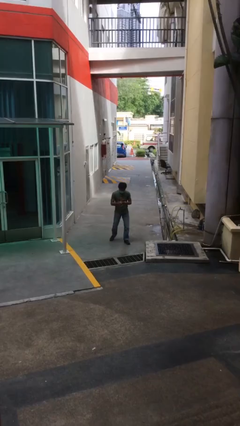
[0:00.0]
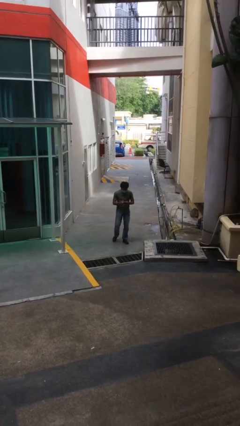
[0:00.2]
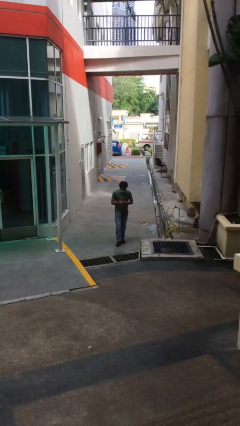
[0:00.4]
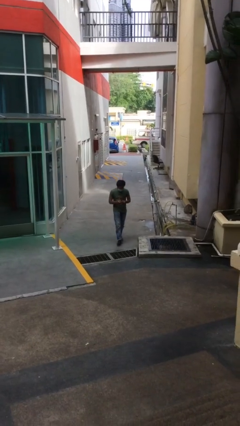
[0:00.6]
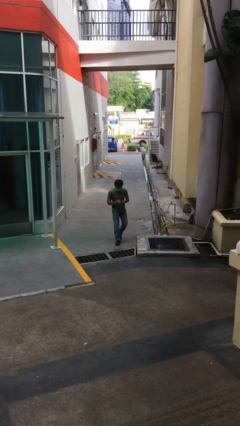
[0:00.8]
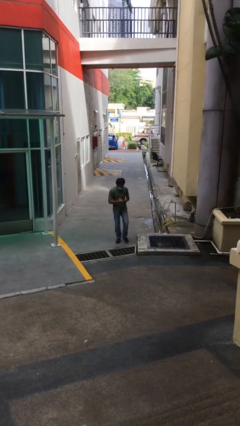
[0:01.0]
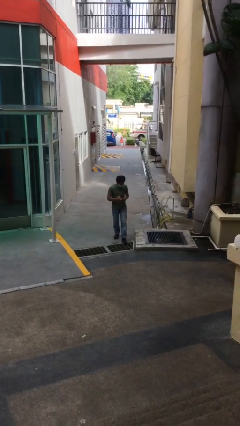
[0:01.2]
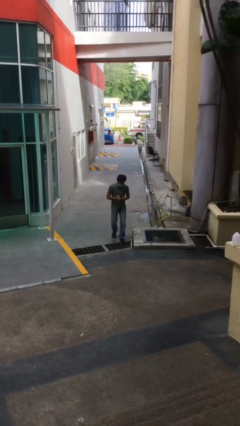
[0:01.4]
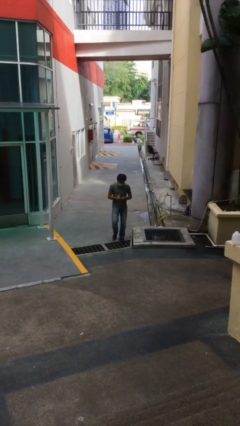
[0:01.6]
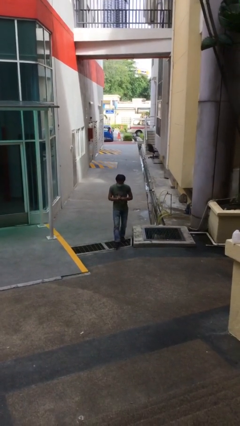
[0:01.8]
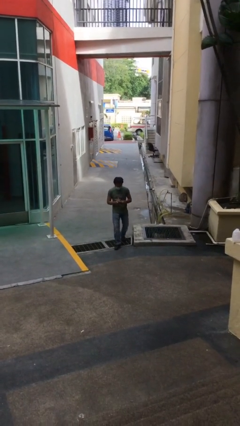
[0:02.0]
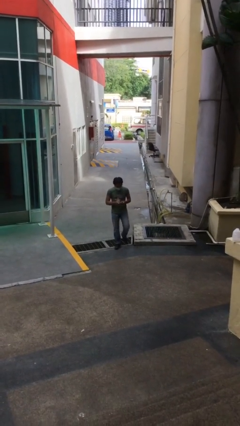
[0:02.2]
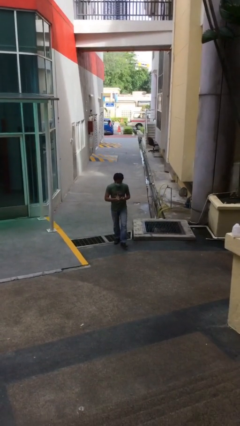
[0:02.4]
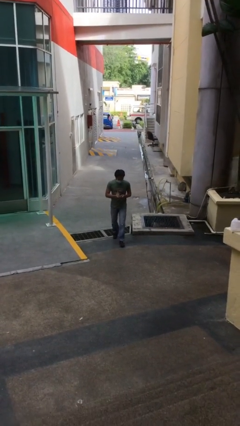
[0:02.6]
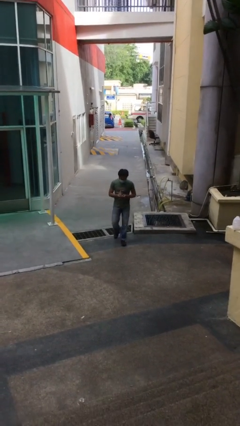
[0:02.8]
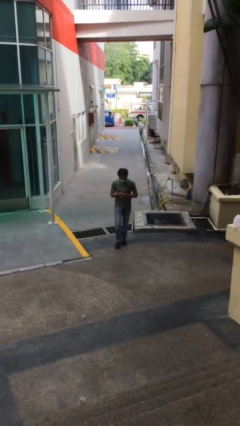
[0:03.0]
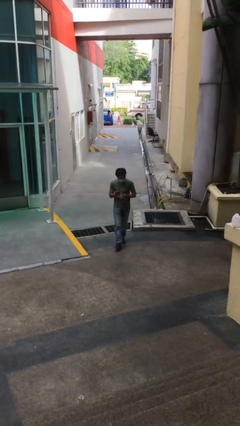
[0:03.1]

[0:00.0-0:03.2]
person texts on phone

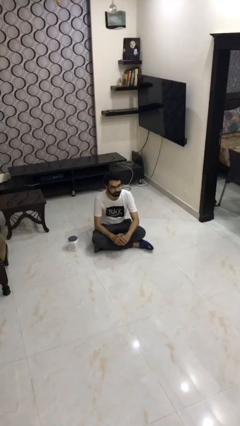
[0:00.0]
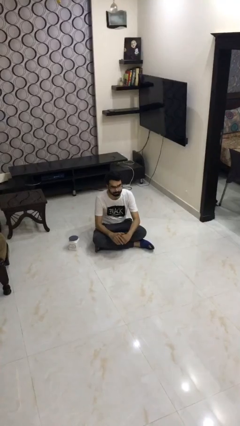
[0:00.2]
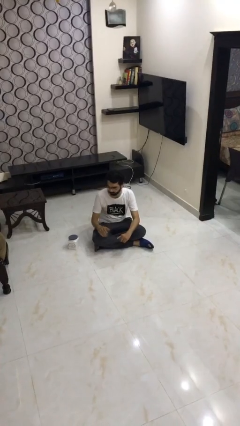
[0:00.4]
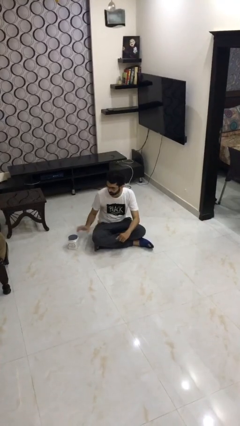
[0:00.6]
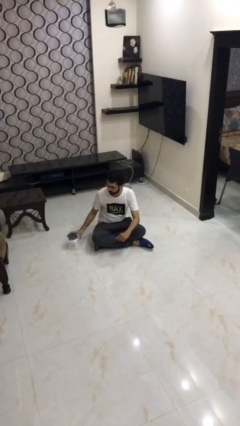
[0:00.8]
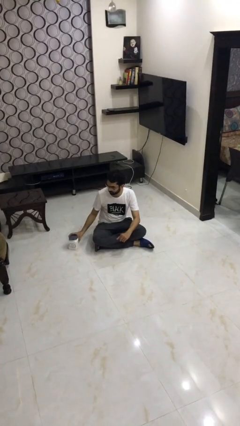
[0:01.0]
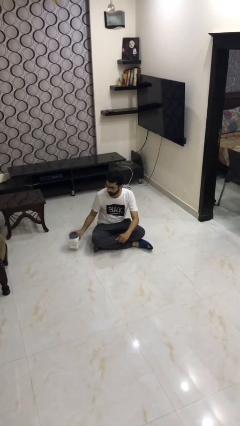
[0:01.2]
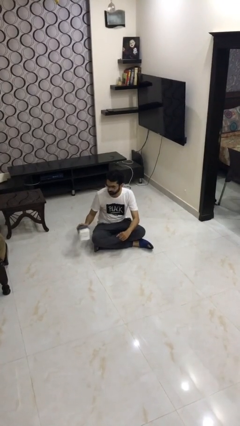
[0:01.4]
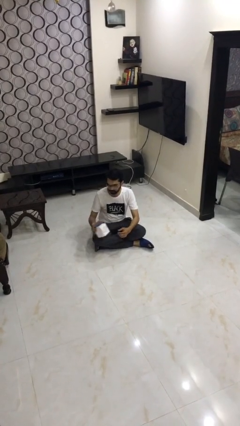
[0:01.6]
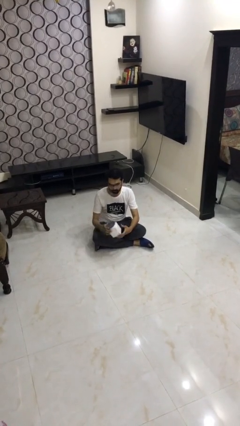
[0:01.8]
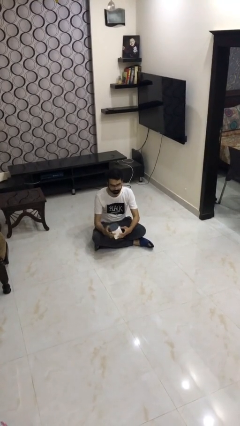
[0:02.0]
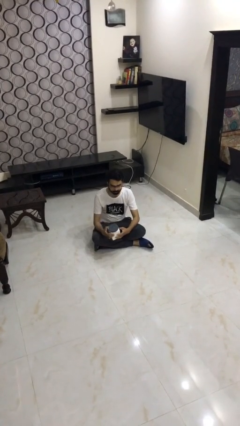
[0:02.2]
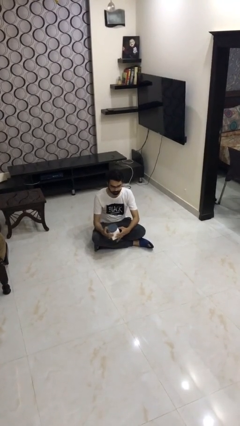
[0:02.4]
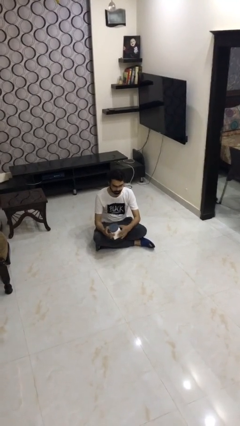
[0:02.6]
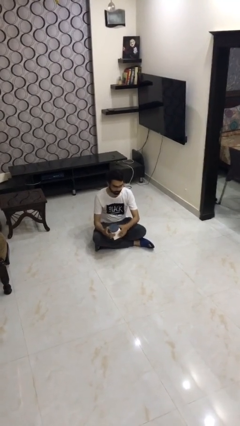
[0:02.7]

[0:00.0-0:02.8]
person picks up object from floor

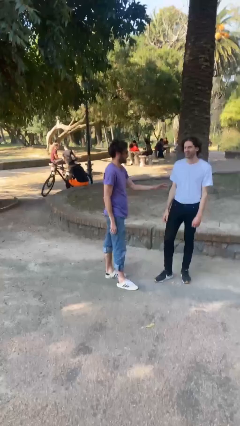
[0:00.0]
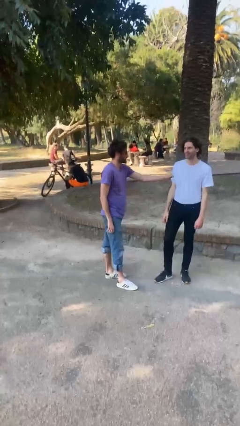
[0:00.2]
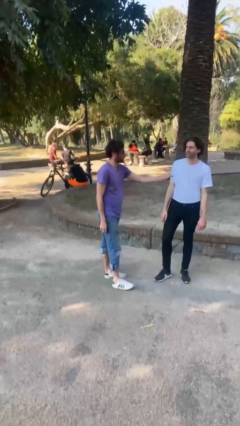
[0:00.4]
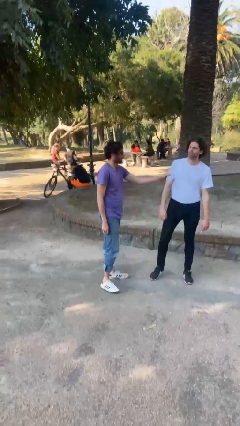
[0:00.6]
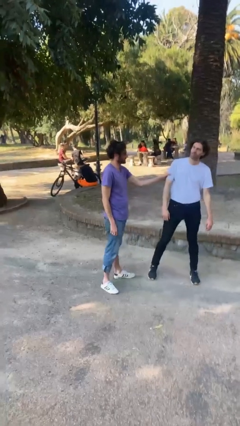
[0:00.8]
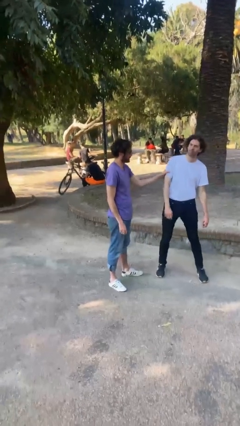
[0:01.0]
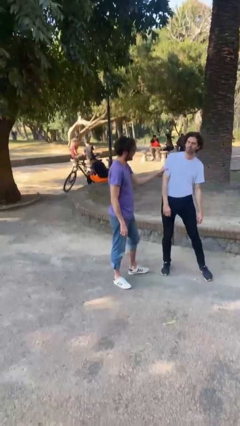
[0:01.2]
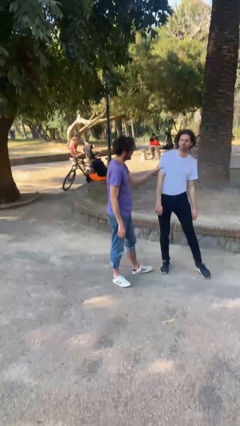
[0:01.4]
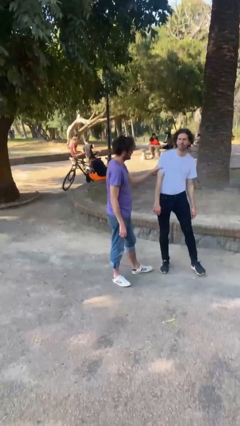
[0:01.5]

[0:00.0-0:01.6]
person grabs person by bicep

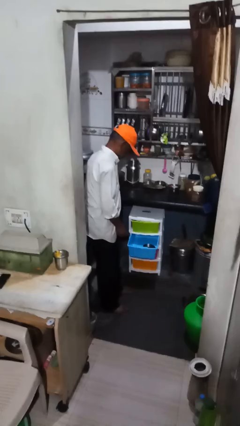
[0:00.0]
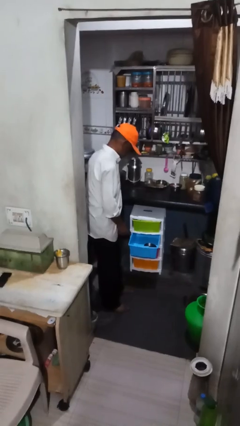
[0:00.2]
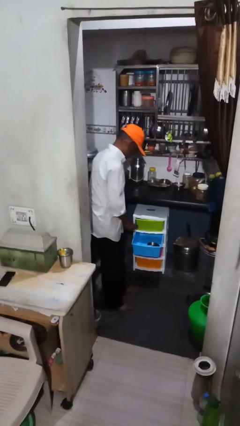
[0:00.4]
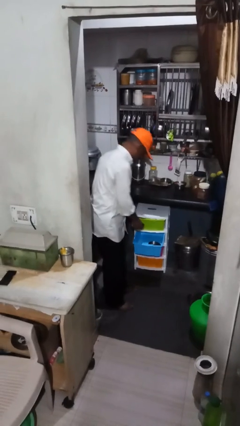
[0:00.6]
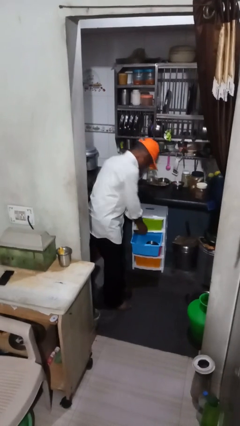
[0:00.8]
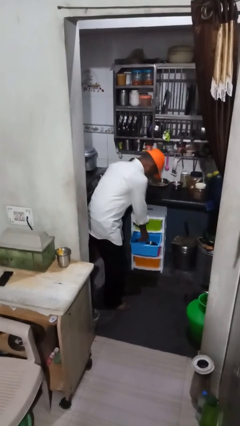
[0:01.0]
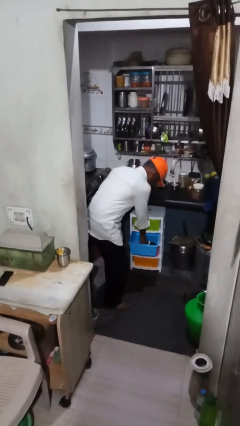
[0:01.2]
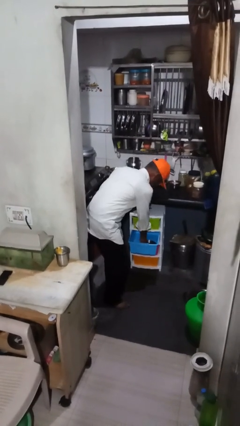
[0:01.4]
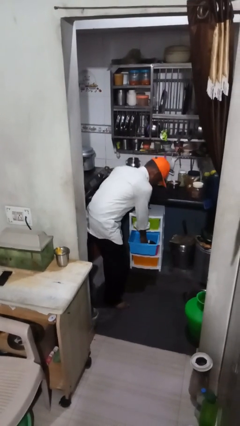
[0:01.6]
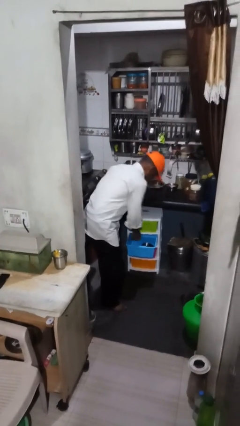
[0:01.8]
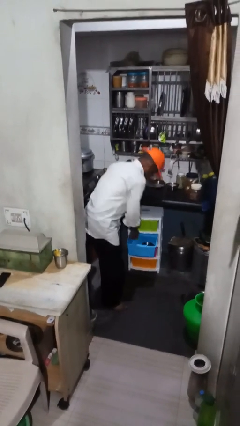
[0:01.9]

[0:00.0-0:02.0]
person puts object in cabinet

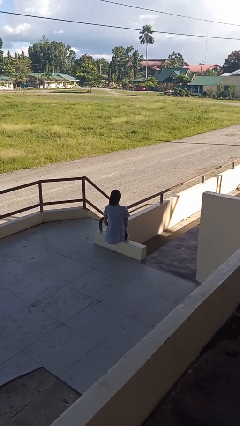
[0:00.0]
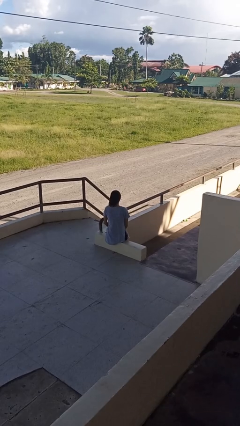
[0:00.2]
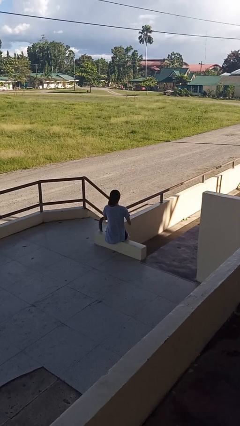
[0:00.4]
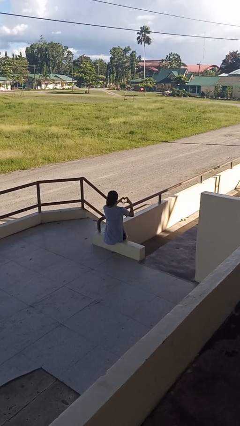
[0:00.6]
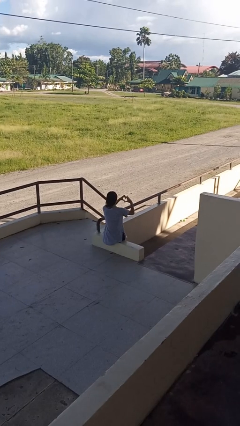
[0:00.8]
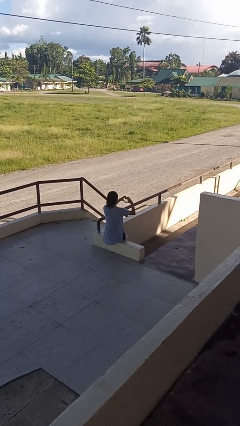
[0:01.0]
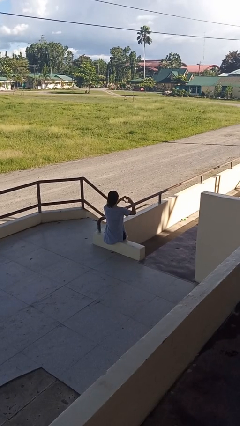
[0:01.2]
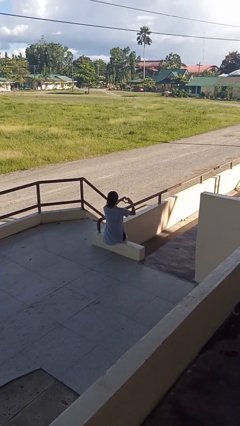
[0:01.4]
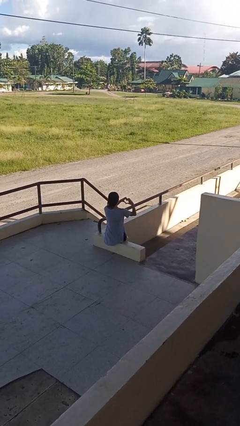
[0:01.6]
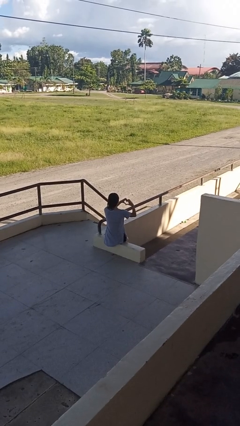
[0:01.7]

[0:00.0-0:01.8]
person gestures heart

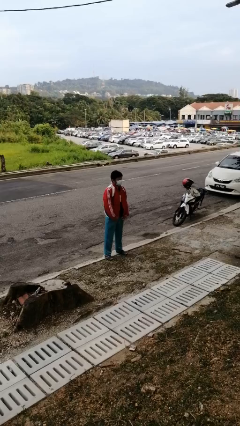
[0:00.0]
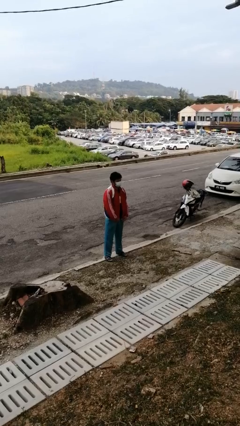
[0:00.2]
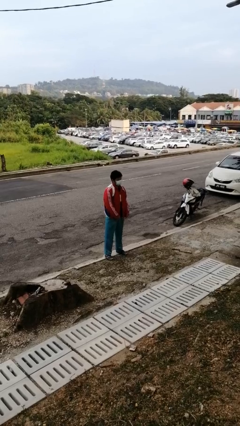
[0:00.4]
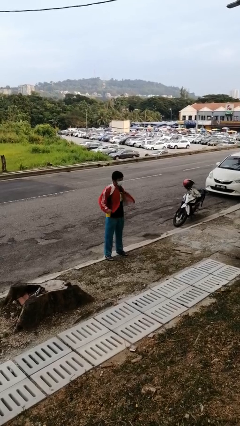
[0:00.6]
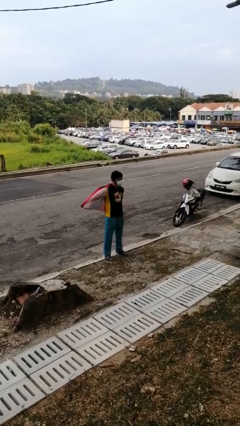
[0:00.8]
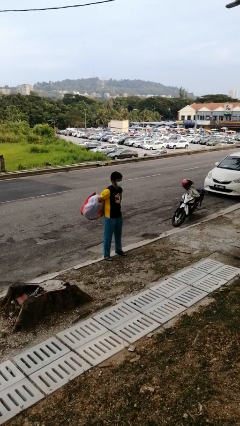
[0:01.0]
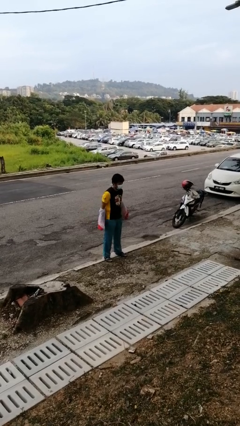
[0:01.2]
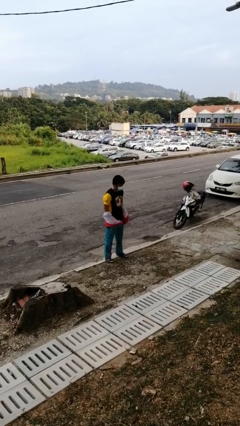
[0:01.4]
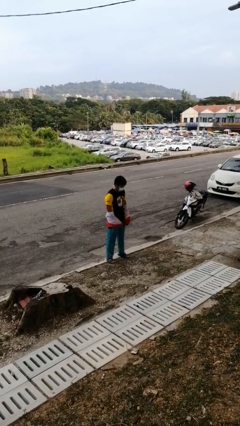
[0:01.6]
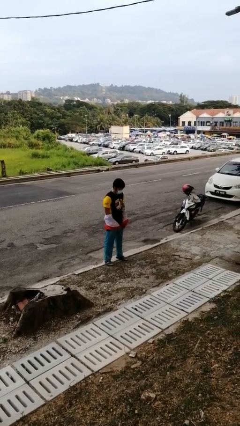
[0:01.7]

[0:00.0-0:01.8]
person takes off jacket

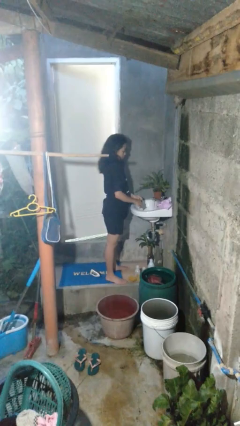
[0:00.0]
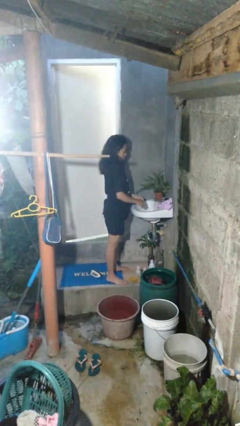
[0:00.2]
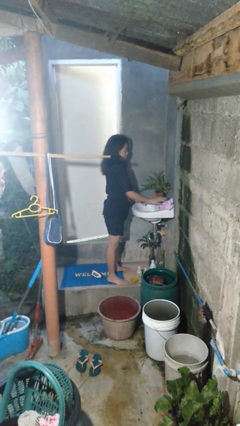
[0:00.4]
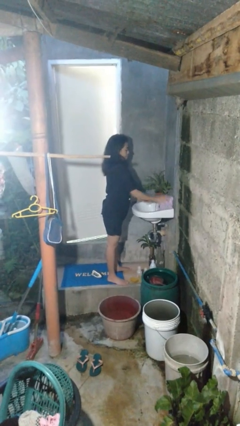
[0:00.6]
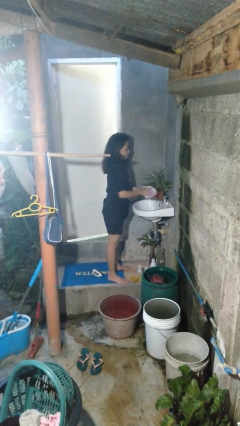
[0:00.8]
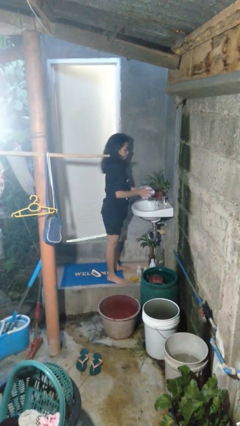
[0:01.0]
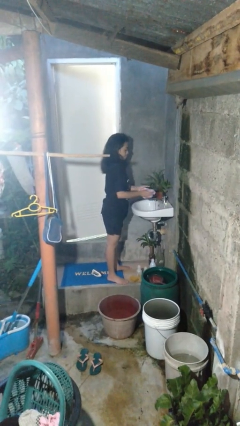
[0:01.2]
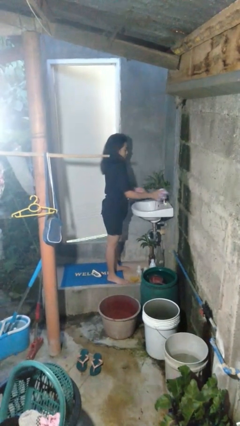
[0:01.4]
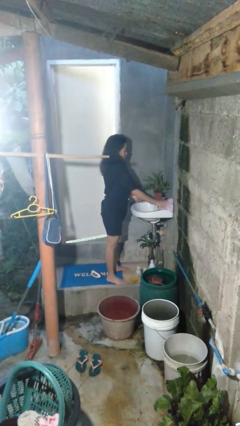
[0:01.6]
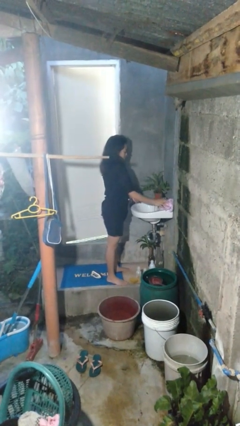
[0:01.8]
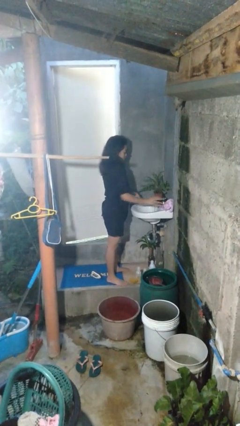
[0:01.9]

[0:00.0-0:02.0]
person dries hands with towel

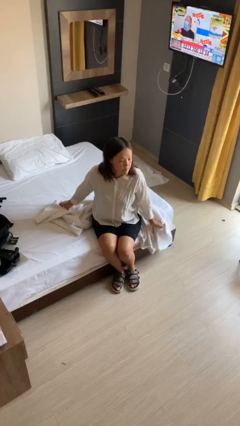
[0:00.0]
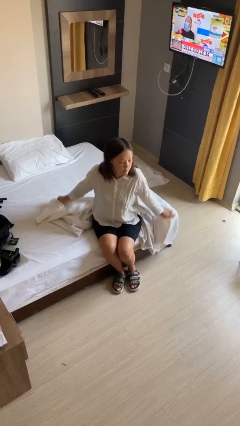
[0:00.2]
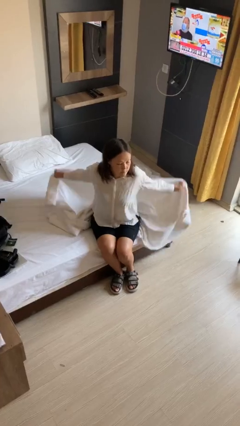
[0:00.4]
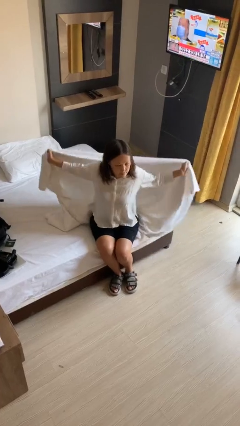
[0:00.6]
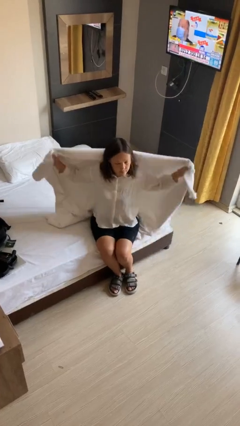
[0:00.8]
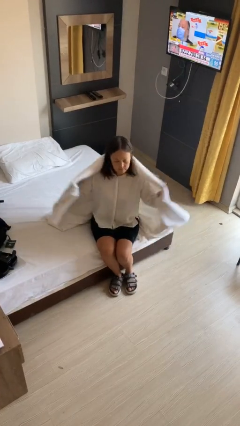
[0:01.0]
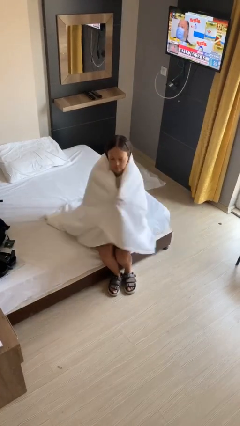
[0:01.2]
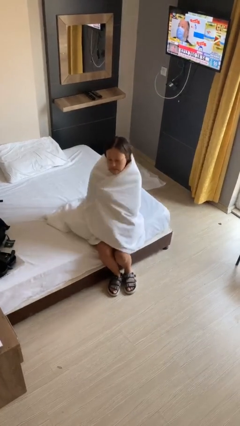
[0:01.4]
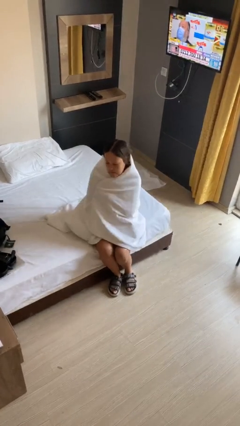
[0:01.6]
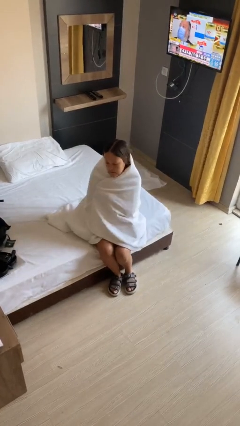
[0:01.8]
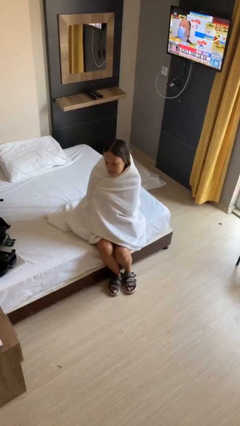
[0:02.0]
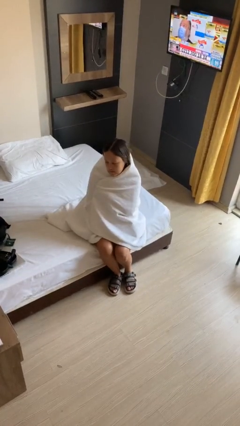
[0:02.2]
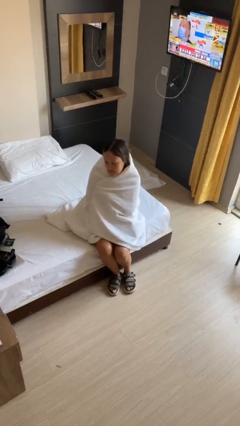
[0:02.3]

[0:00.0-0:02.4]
person covers with blanket
